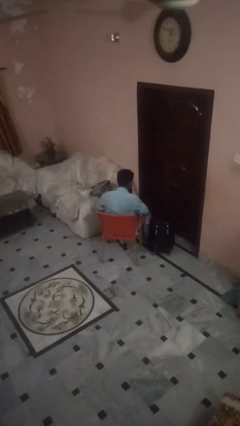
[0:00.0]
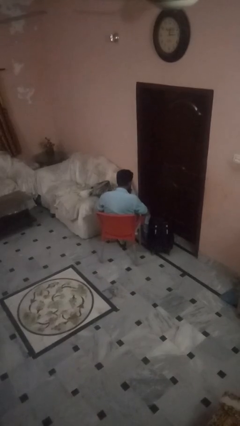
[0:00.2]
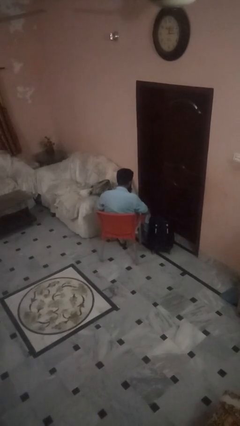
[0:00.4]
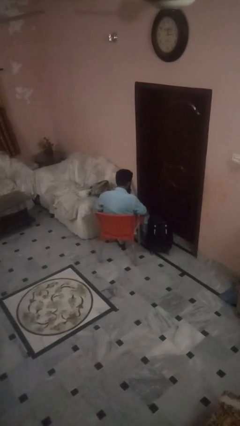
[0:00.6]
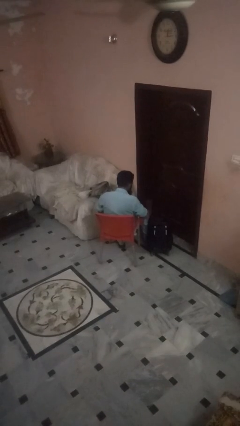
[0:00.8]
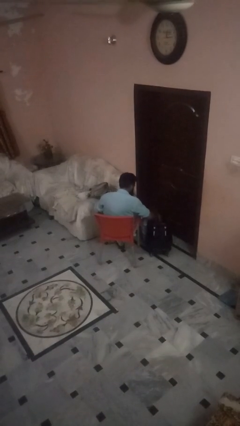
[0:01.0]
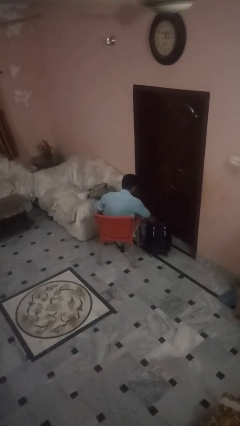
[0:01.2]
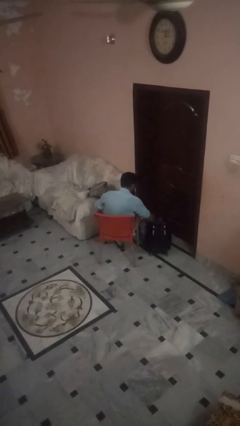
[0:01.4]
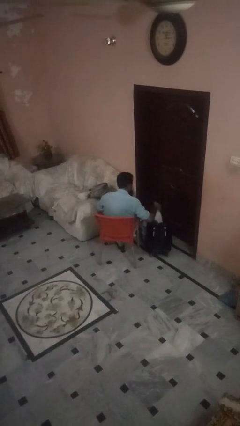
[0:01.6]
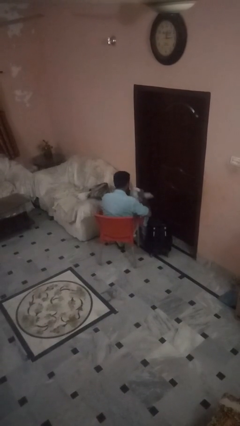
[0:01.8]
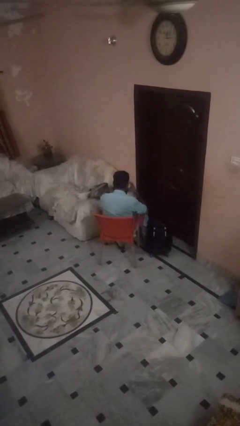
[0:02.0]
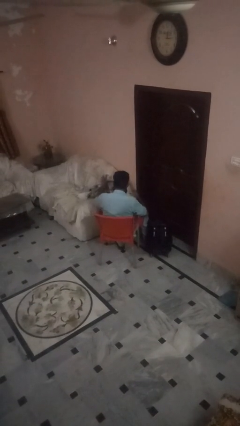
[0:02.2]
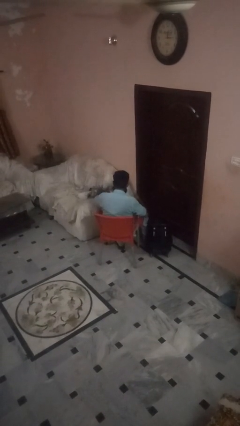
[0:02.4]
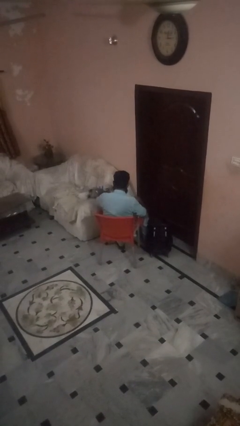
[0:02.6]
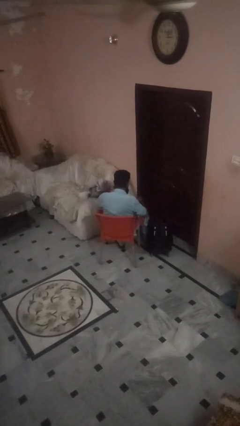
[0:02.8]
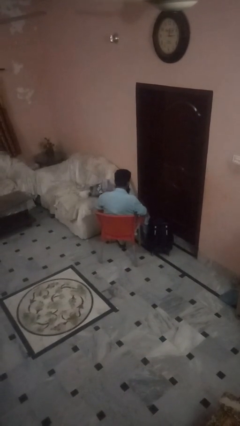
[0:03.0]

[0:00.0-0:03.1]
person unloads clothes from suitcase

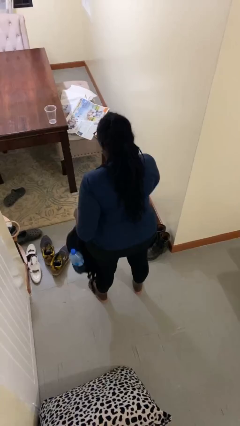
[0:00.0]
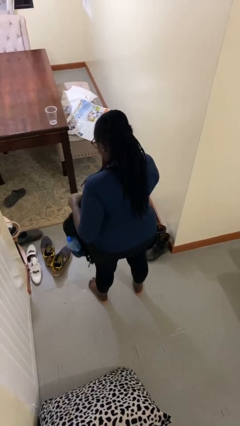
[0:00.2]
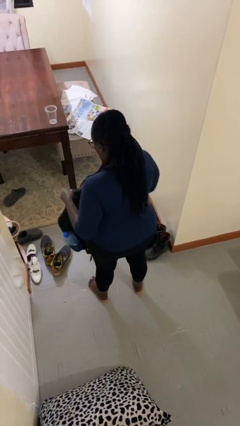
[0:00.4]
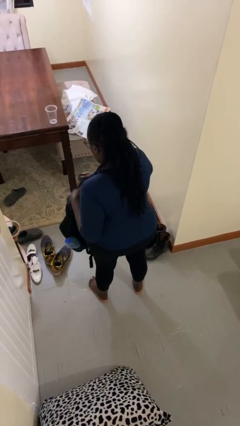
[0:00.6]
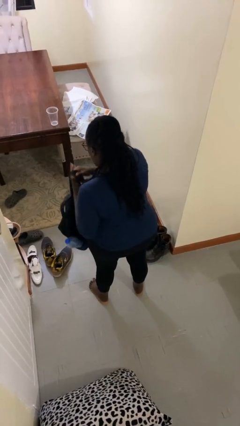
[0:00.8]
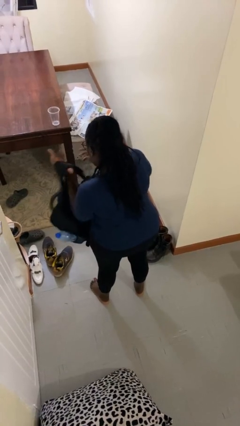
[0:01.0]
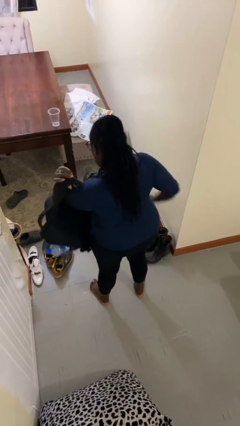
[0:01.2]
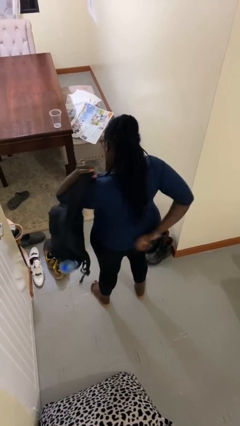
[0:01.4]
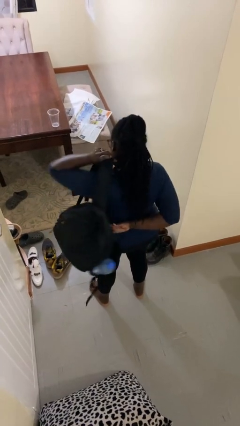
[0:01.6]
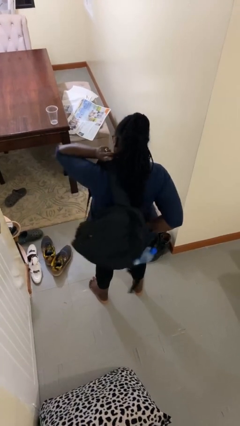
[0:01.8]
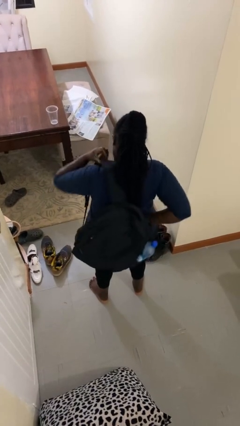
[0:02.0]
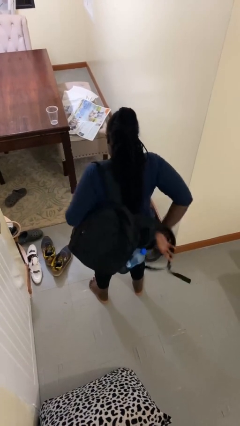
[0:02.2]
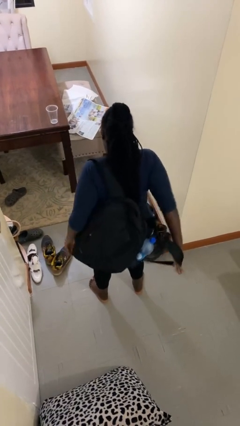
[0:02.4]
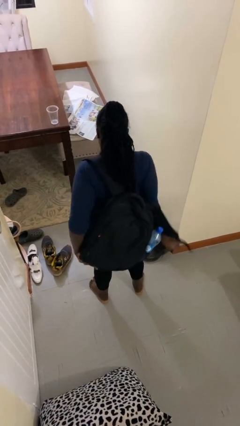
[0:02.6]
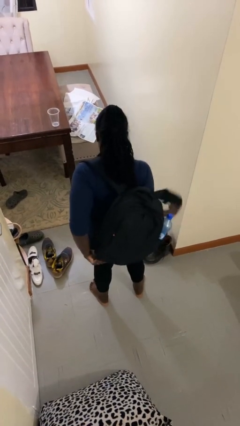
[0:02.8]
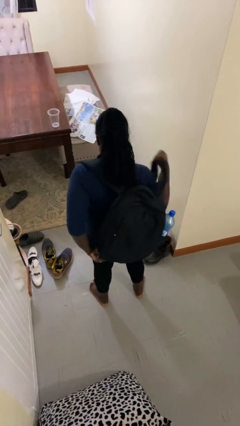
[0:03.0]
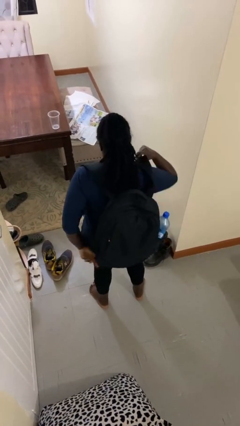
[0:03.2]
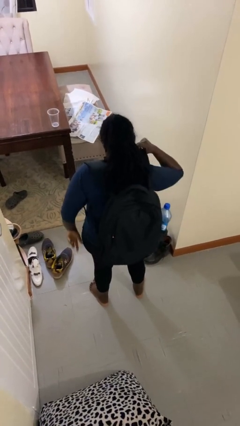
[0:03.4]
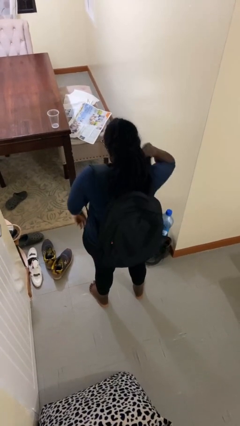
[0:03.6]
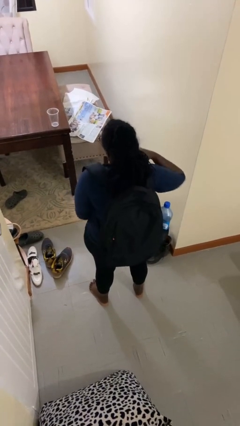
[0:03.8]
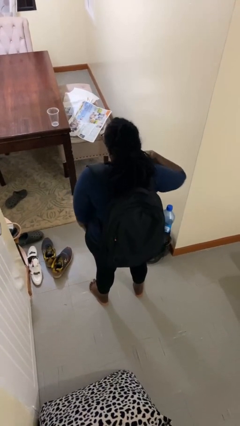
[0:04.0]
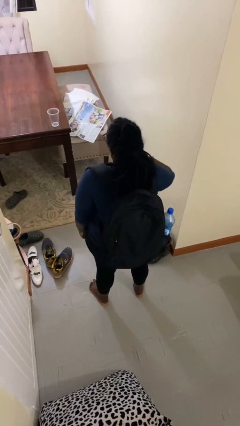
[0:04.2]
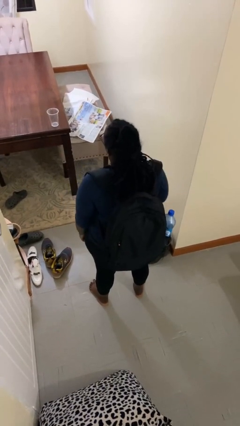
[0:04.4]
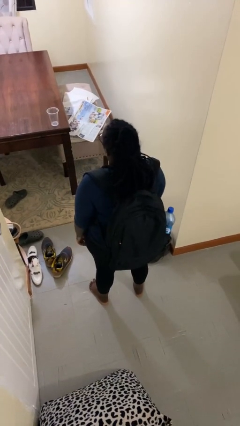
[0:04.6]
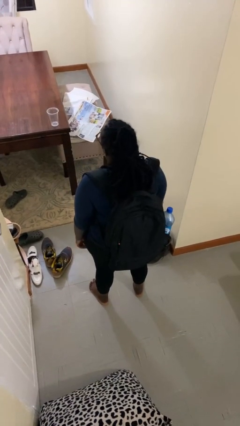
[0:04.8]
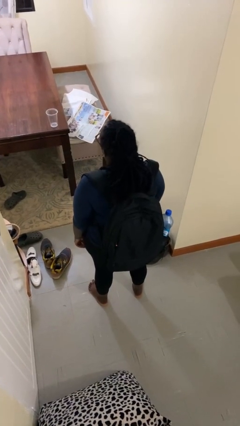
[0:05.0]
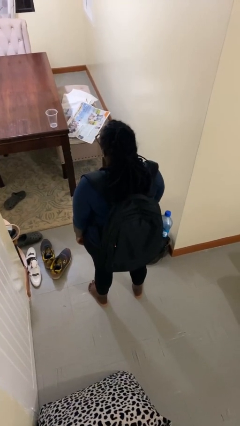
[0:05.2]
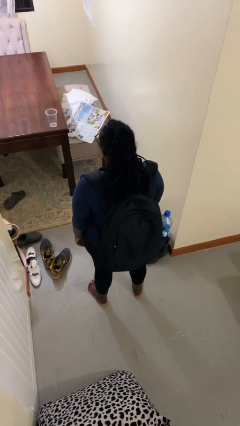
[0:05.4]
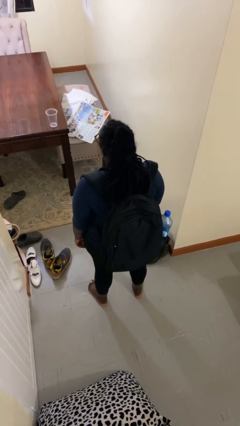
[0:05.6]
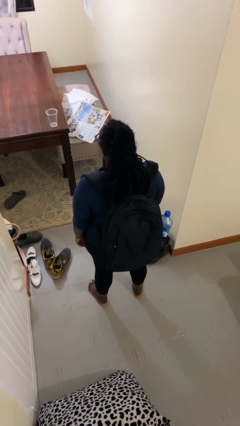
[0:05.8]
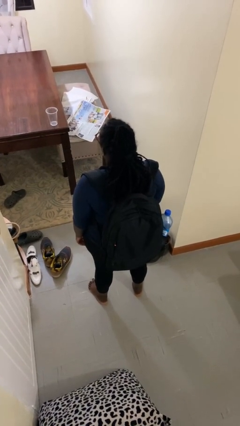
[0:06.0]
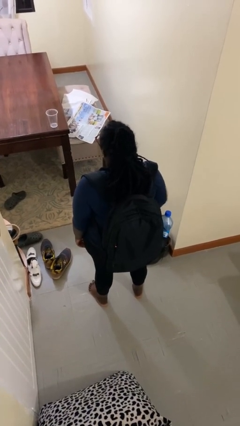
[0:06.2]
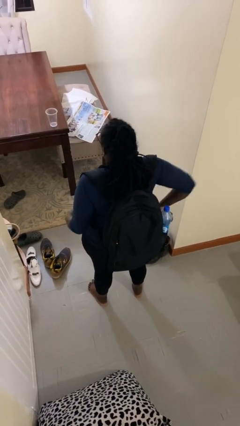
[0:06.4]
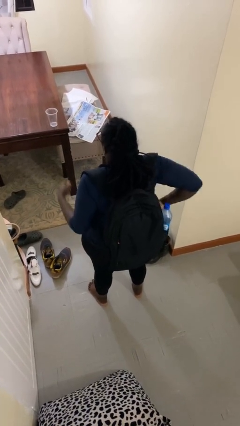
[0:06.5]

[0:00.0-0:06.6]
person puts on backpack

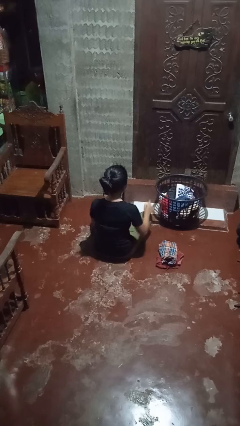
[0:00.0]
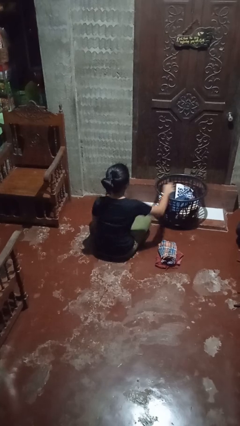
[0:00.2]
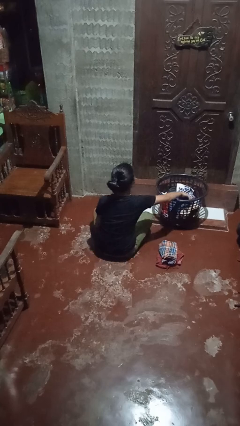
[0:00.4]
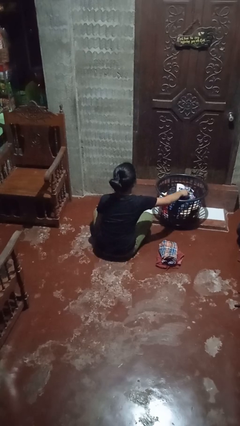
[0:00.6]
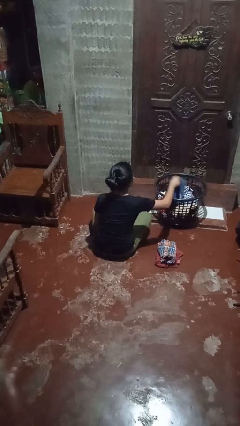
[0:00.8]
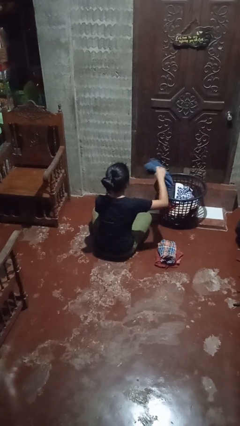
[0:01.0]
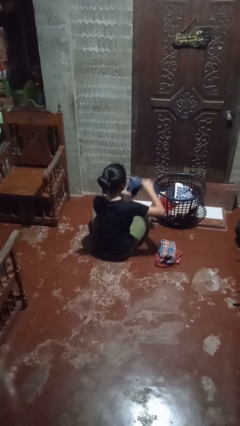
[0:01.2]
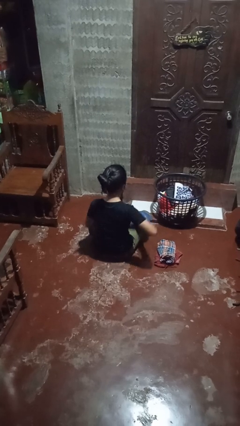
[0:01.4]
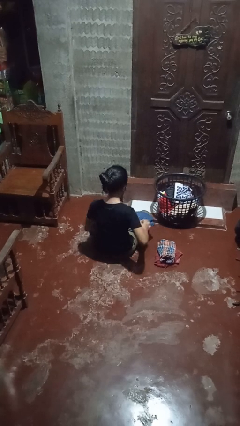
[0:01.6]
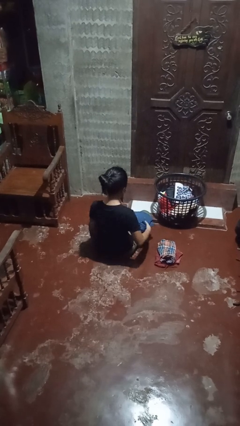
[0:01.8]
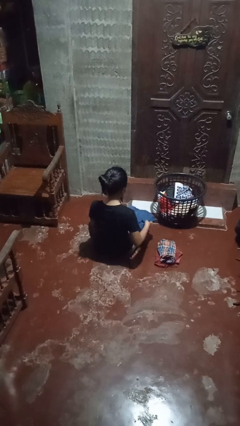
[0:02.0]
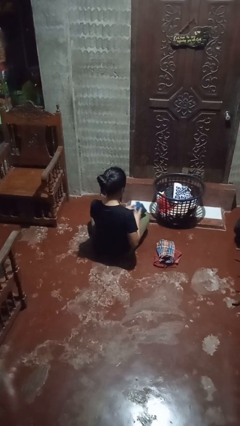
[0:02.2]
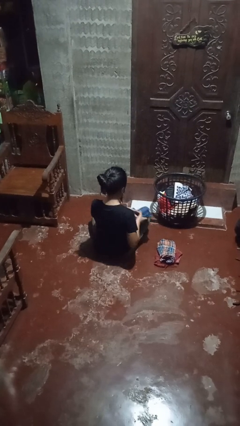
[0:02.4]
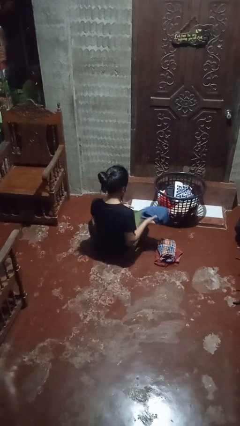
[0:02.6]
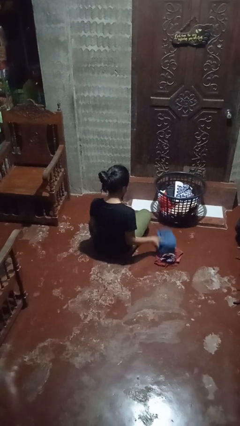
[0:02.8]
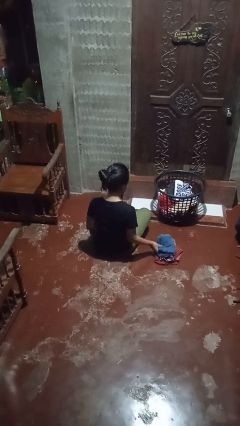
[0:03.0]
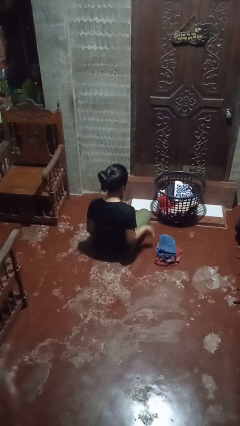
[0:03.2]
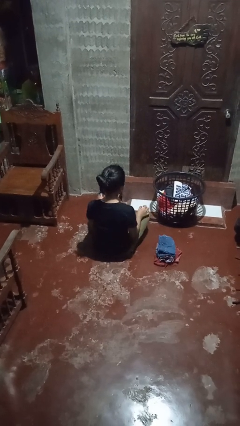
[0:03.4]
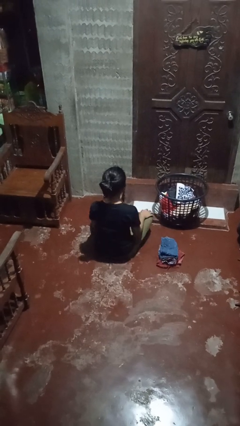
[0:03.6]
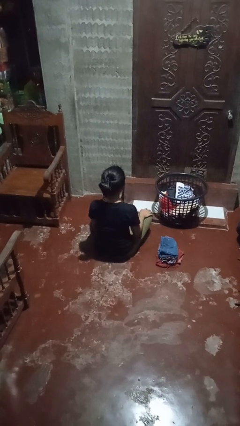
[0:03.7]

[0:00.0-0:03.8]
person folds pants

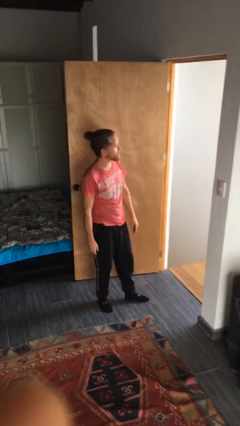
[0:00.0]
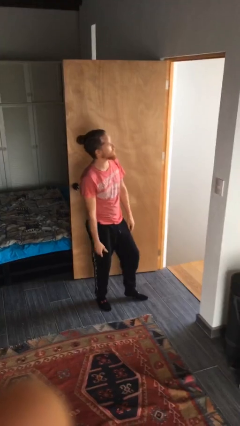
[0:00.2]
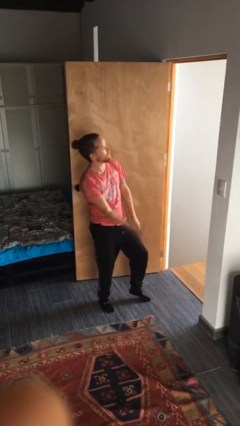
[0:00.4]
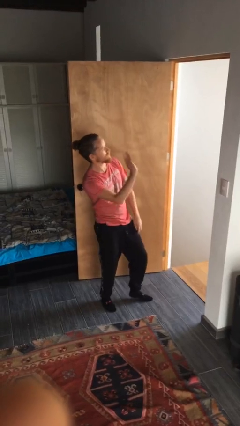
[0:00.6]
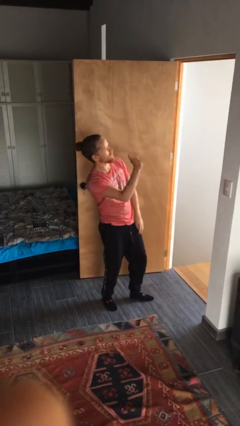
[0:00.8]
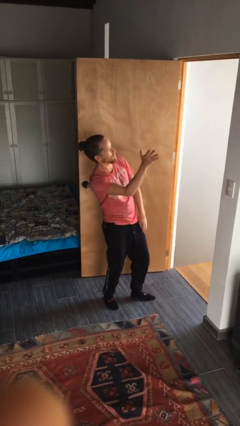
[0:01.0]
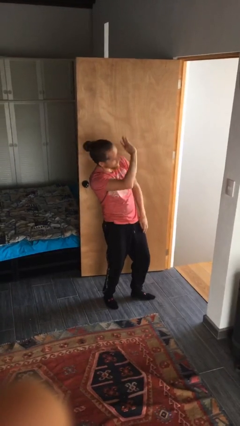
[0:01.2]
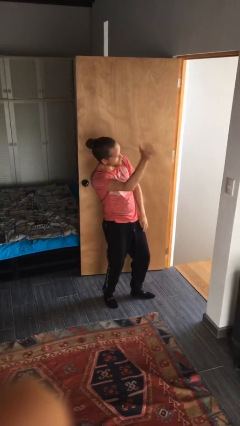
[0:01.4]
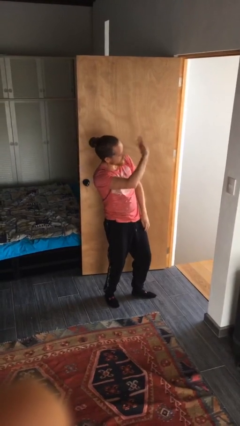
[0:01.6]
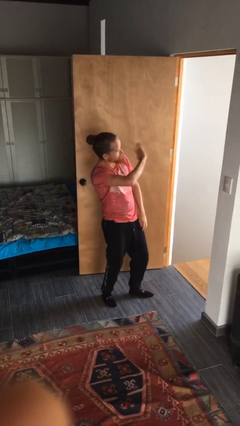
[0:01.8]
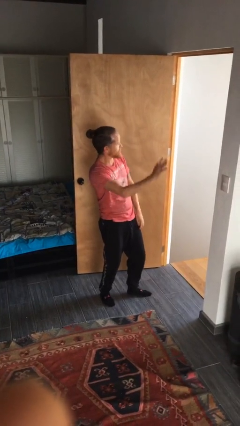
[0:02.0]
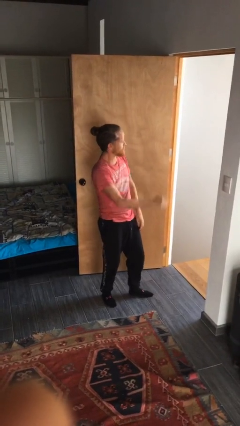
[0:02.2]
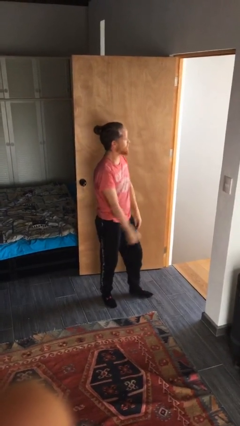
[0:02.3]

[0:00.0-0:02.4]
person waves at person

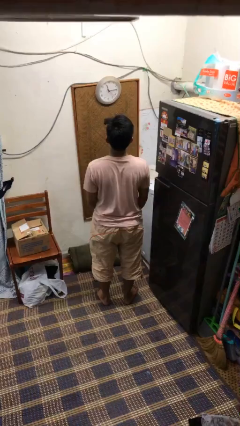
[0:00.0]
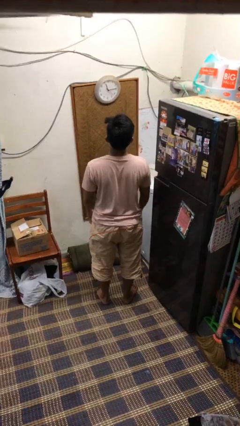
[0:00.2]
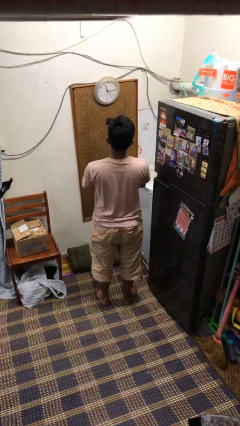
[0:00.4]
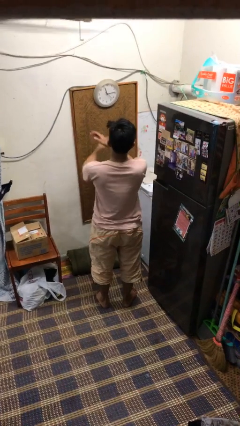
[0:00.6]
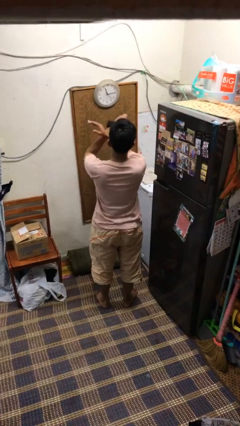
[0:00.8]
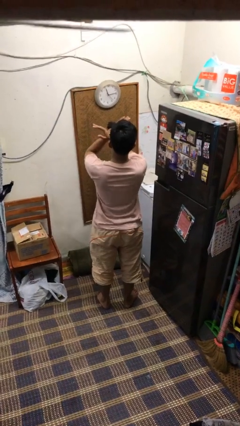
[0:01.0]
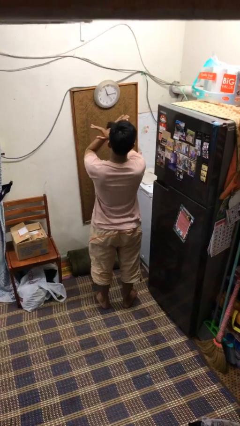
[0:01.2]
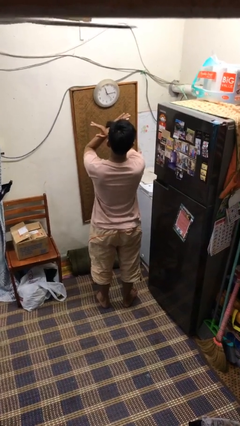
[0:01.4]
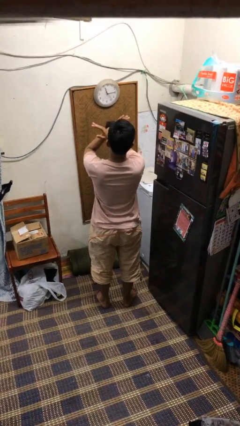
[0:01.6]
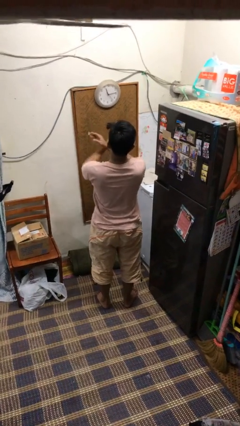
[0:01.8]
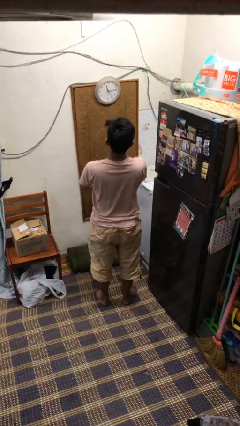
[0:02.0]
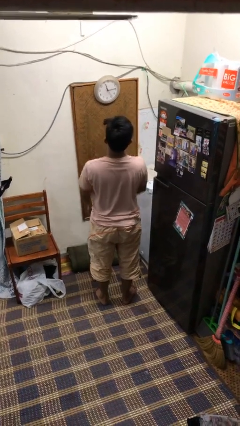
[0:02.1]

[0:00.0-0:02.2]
person gestures arms x
